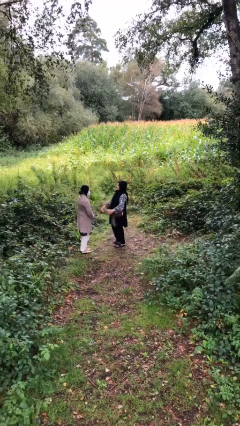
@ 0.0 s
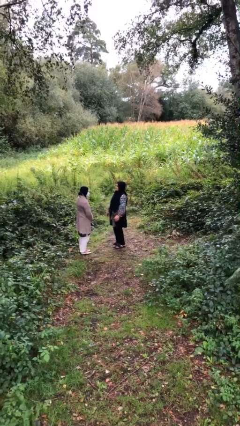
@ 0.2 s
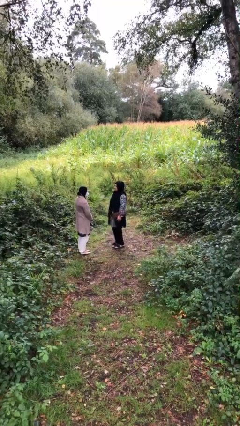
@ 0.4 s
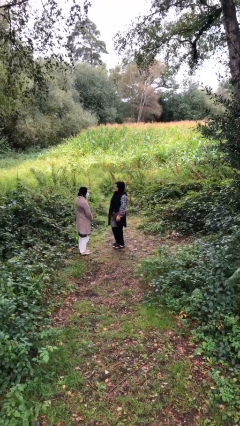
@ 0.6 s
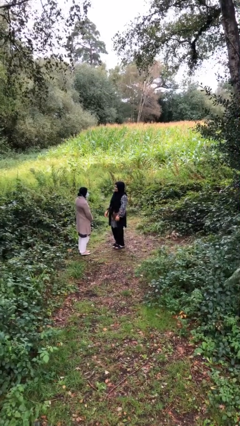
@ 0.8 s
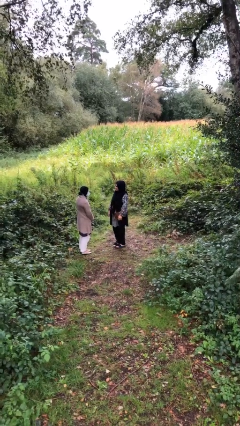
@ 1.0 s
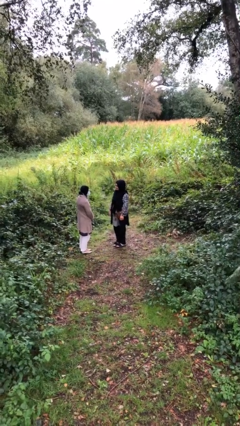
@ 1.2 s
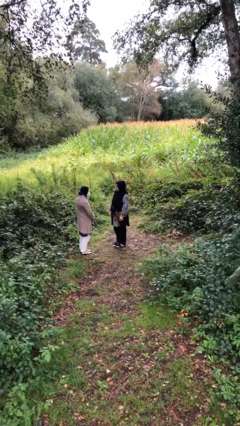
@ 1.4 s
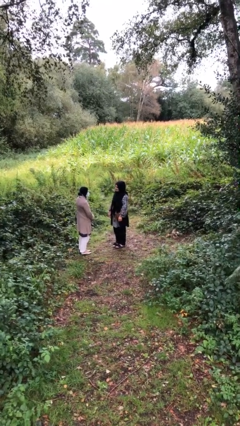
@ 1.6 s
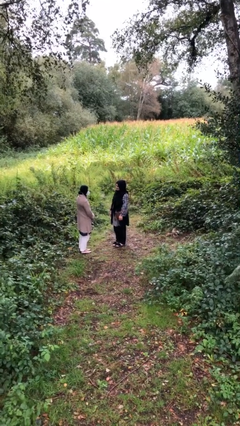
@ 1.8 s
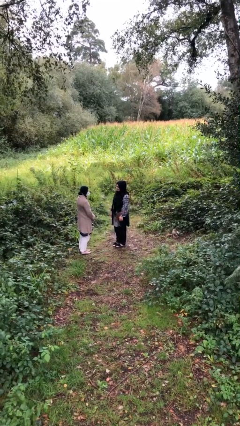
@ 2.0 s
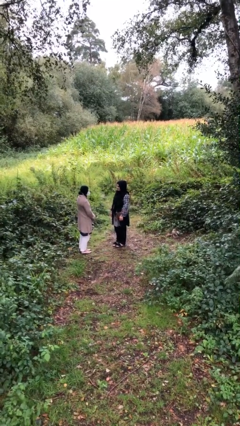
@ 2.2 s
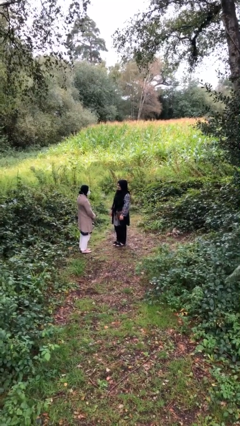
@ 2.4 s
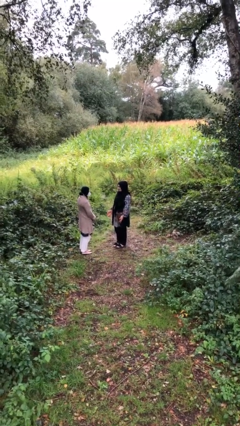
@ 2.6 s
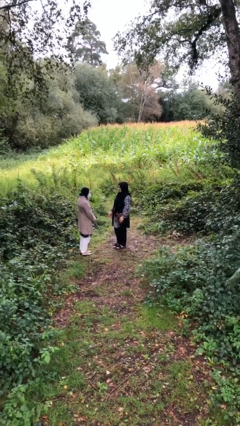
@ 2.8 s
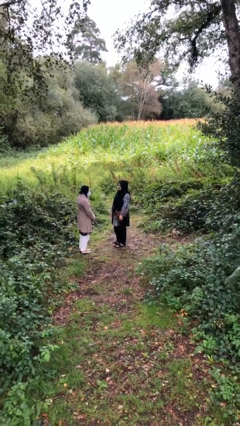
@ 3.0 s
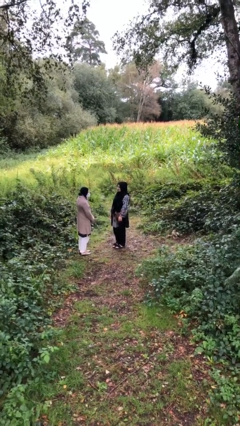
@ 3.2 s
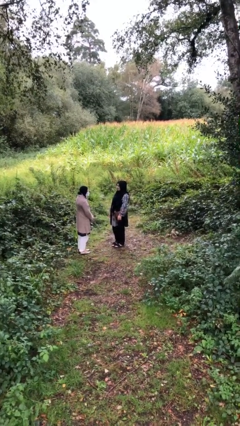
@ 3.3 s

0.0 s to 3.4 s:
person talks to person

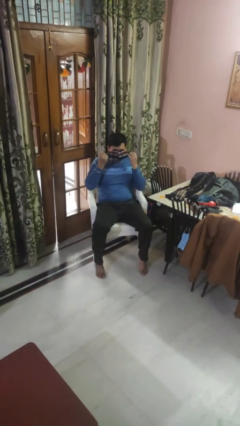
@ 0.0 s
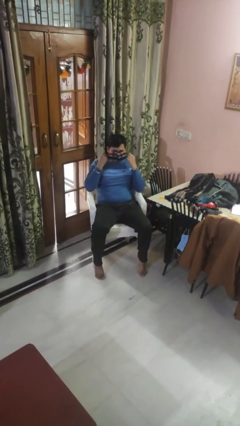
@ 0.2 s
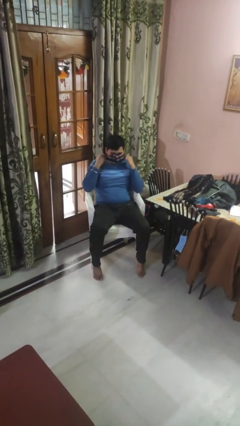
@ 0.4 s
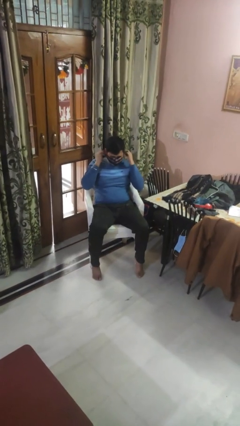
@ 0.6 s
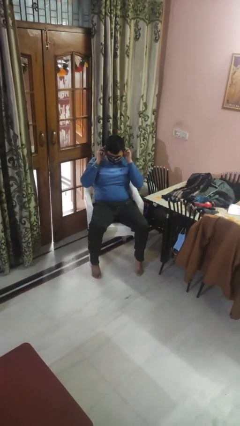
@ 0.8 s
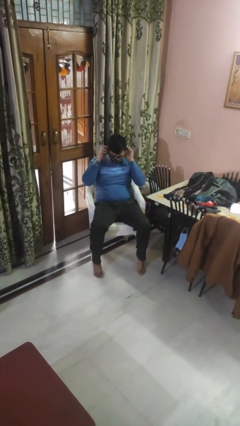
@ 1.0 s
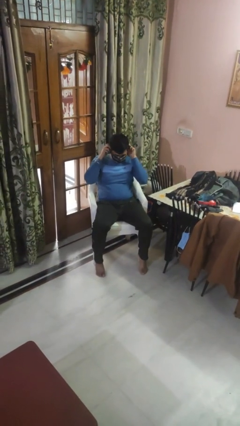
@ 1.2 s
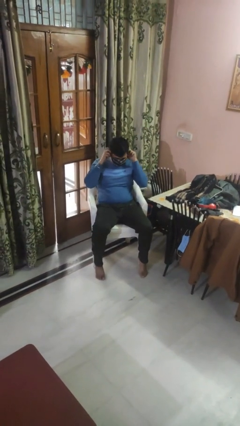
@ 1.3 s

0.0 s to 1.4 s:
person puts on facemask

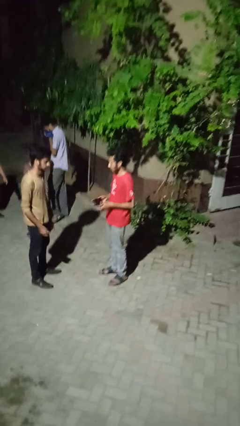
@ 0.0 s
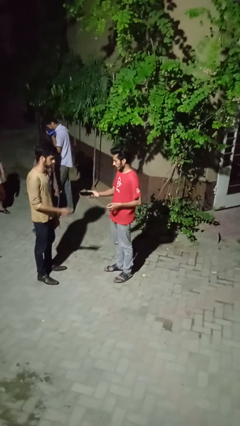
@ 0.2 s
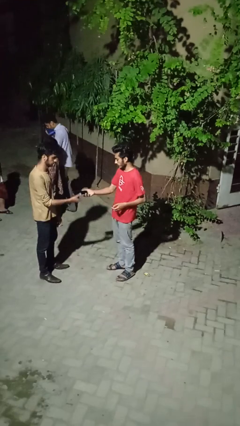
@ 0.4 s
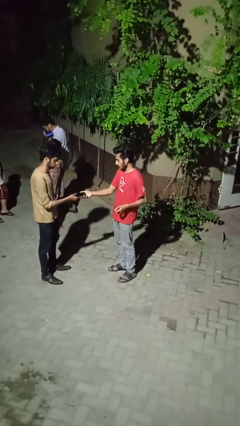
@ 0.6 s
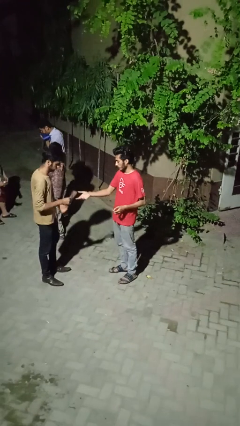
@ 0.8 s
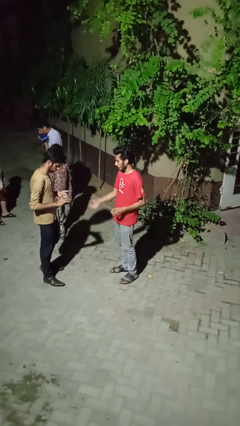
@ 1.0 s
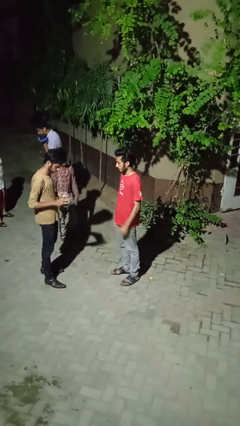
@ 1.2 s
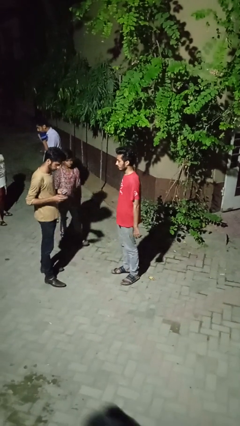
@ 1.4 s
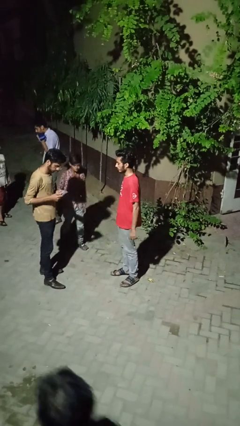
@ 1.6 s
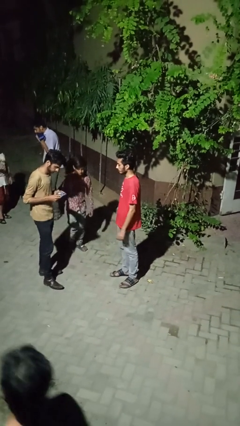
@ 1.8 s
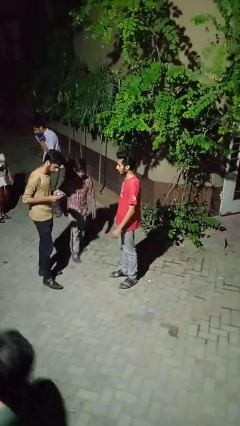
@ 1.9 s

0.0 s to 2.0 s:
person transfers object to person

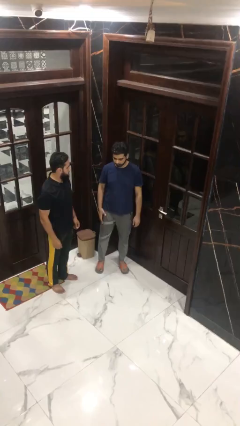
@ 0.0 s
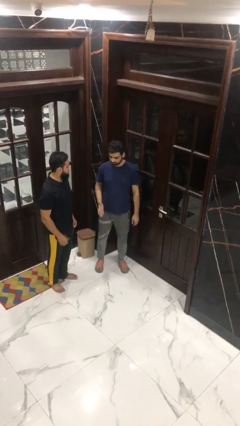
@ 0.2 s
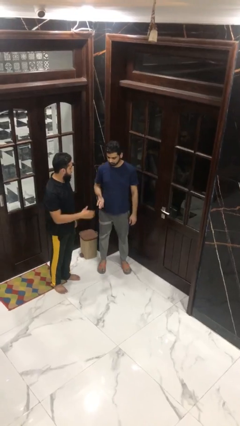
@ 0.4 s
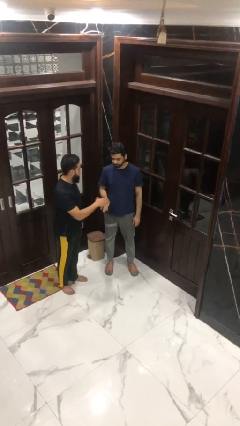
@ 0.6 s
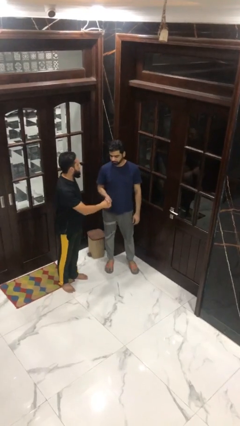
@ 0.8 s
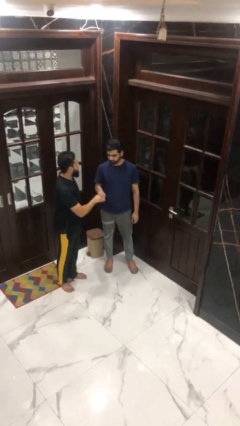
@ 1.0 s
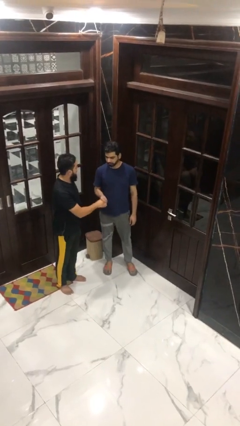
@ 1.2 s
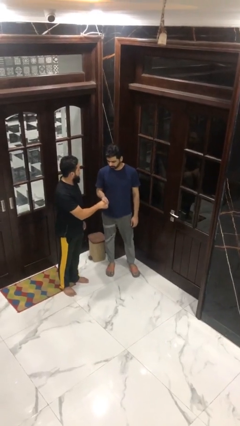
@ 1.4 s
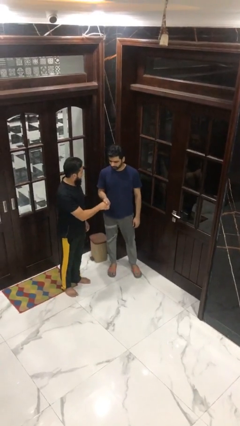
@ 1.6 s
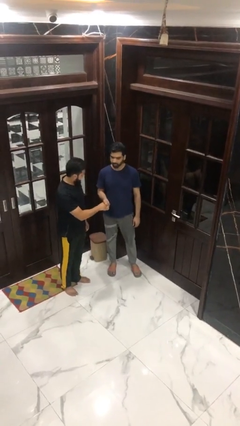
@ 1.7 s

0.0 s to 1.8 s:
person shakes hand

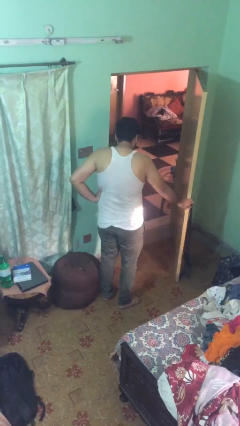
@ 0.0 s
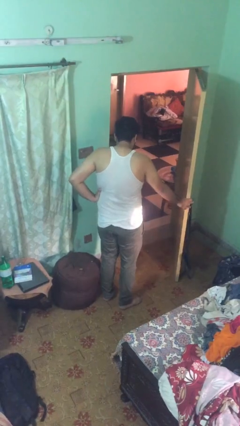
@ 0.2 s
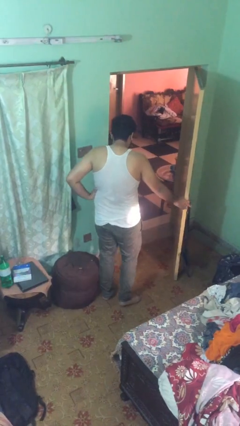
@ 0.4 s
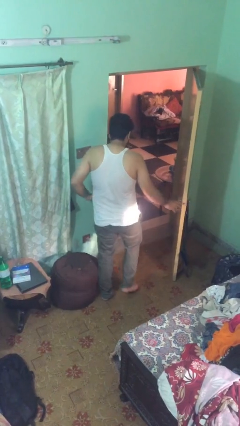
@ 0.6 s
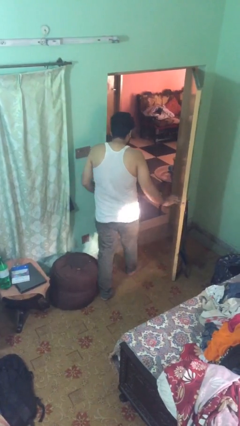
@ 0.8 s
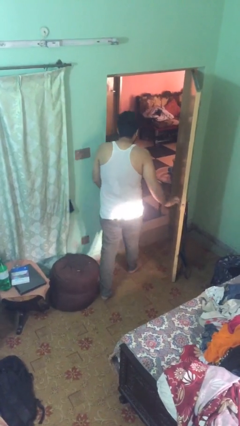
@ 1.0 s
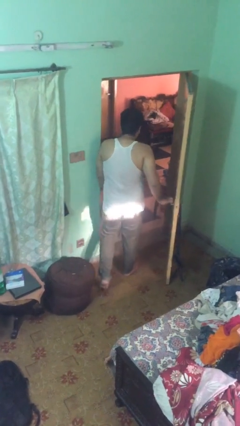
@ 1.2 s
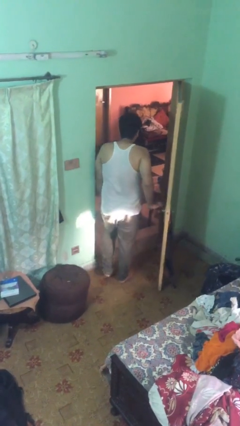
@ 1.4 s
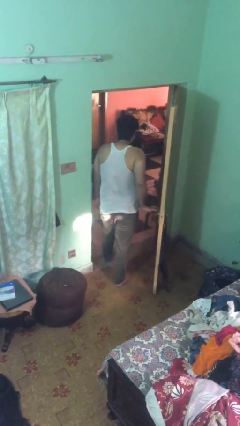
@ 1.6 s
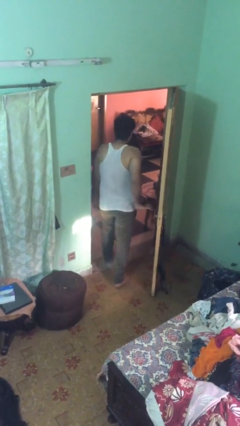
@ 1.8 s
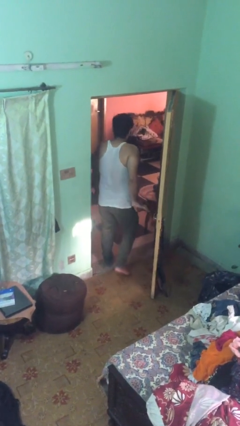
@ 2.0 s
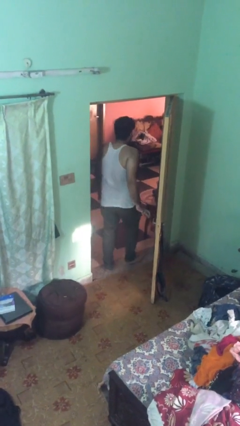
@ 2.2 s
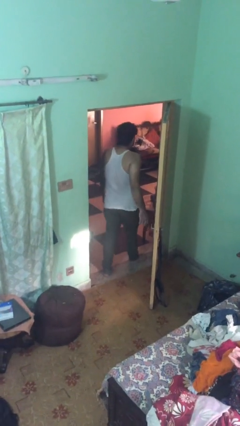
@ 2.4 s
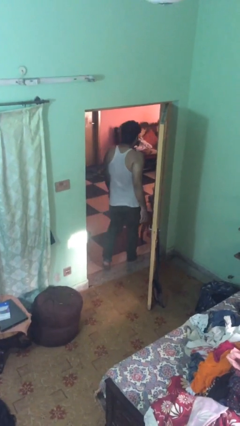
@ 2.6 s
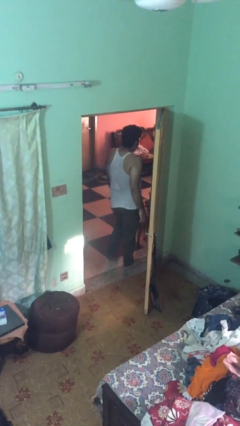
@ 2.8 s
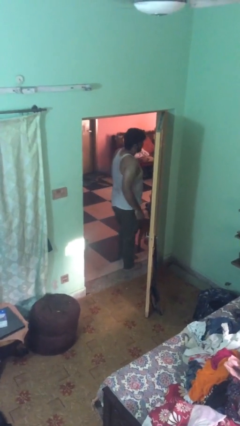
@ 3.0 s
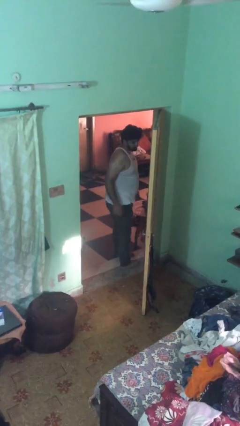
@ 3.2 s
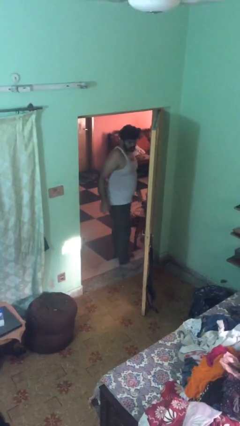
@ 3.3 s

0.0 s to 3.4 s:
person exits scene through structure

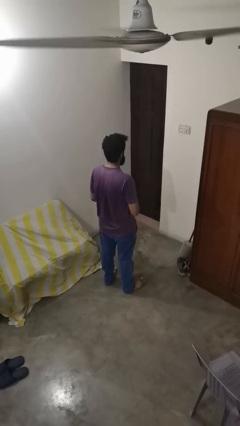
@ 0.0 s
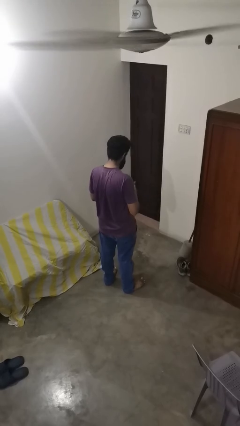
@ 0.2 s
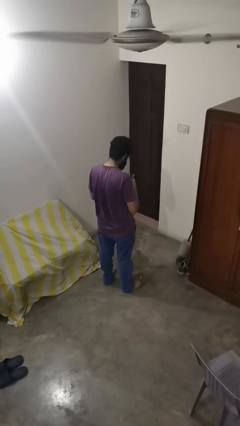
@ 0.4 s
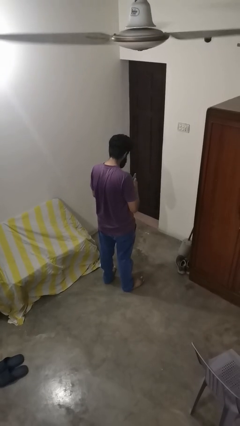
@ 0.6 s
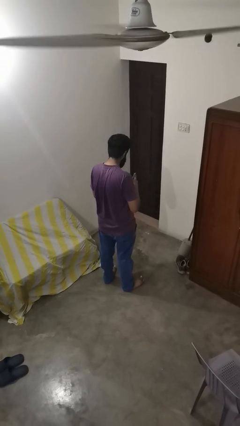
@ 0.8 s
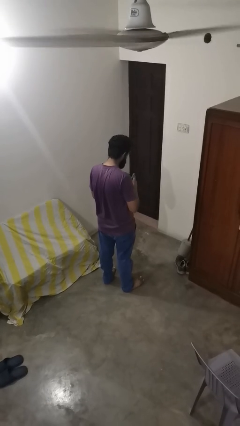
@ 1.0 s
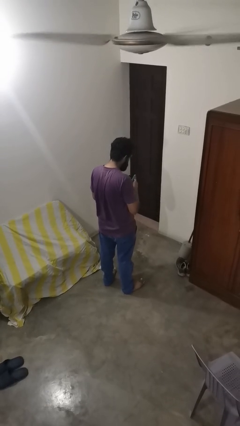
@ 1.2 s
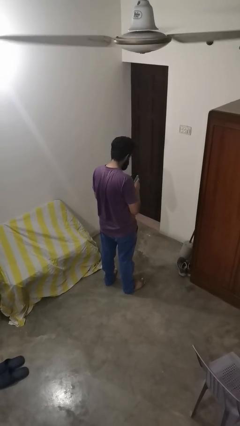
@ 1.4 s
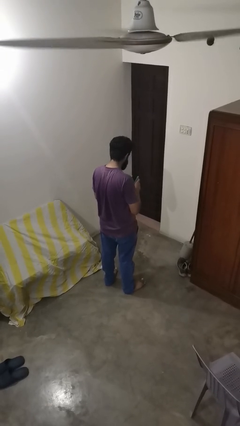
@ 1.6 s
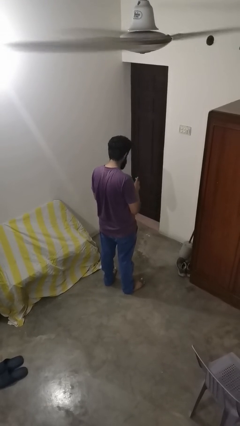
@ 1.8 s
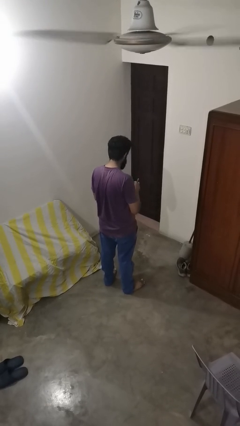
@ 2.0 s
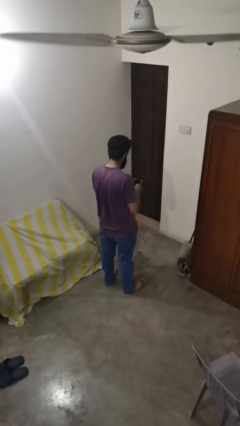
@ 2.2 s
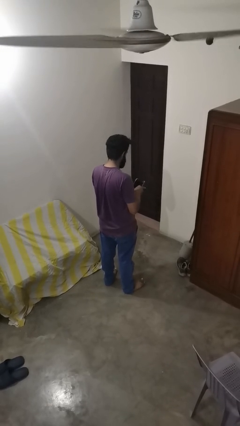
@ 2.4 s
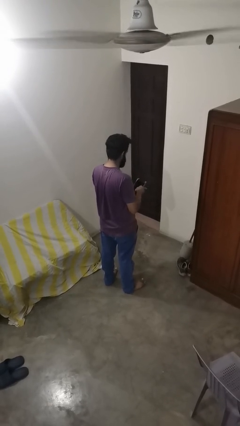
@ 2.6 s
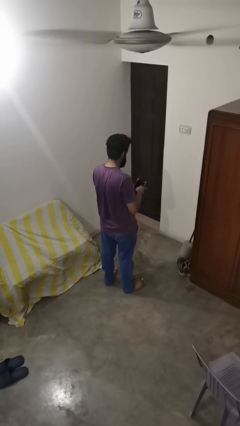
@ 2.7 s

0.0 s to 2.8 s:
person searches in purse

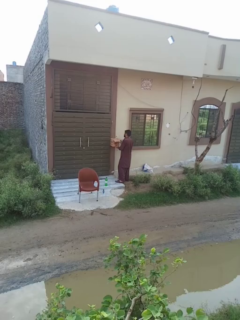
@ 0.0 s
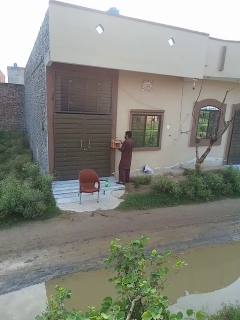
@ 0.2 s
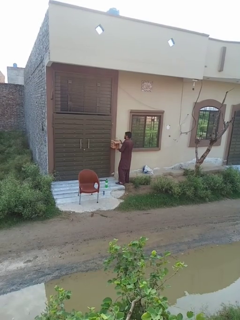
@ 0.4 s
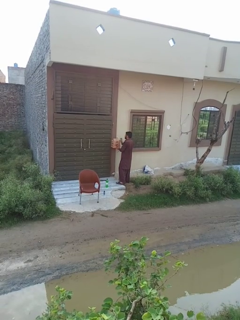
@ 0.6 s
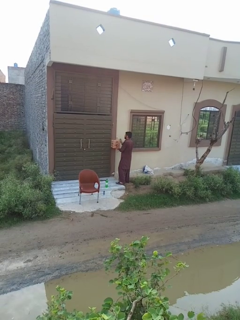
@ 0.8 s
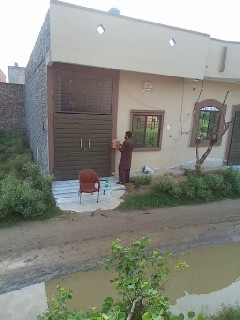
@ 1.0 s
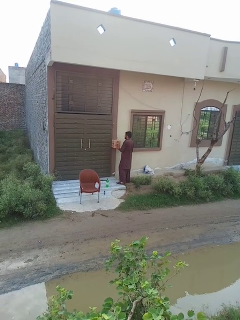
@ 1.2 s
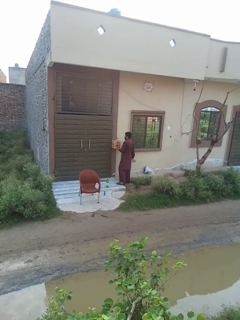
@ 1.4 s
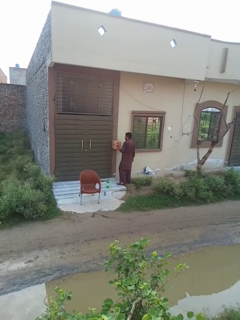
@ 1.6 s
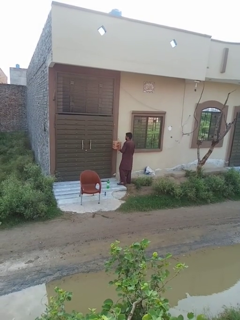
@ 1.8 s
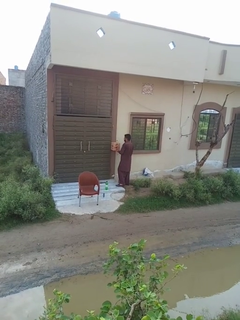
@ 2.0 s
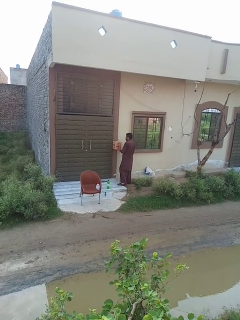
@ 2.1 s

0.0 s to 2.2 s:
person closes mailbox

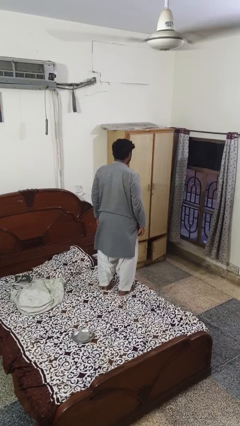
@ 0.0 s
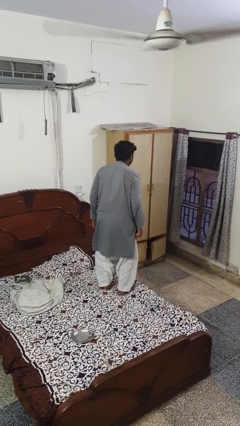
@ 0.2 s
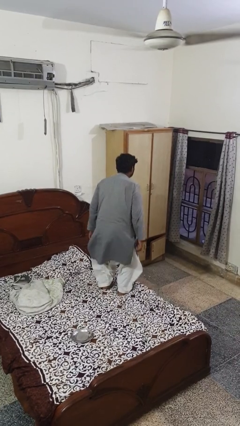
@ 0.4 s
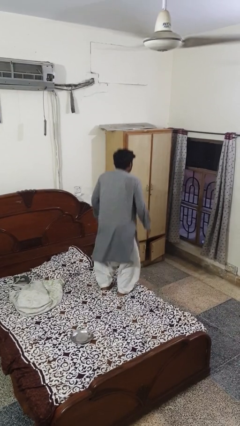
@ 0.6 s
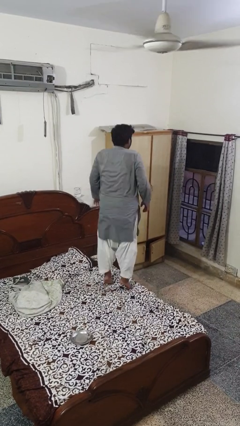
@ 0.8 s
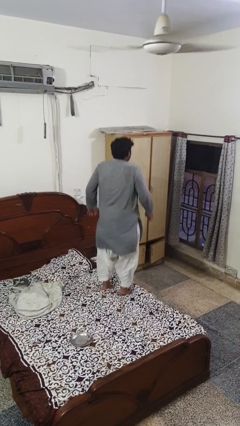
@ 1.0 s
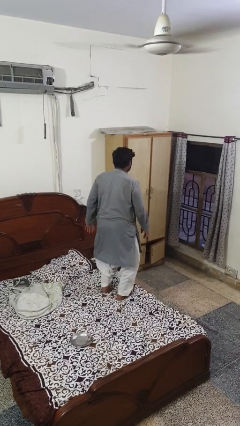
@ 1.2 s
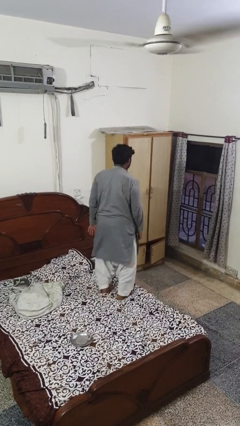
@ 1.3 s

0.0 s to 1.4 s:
person jumps on bed
